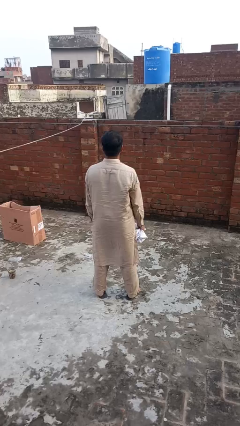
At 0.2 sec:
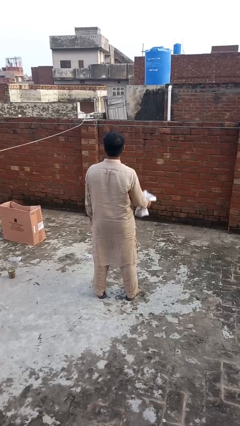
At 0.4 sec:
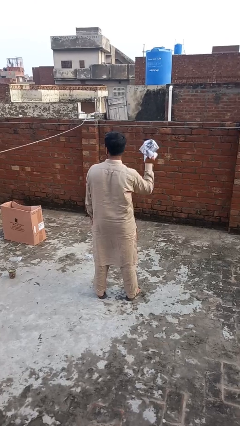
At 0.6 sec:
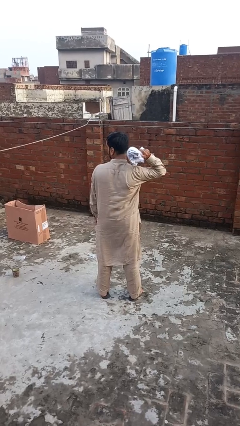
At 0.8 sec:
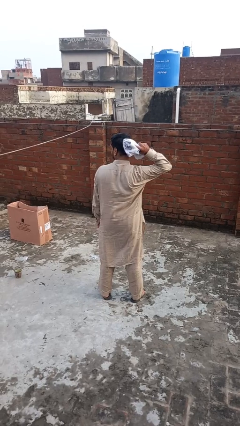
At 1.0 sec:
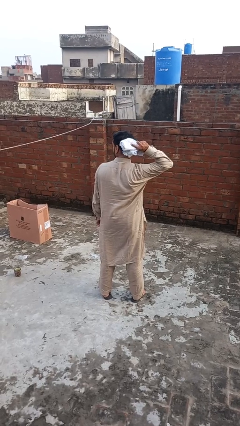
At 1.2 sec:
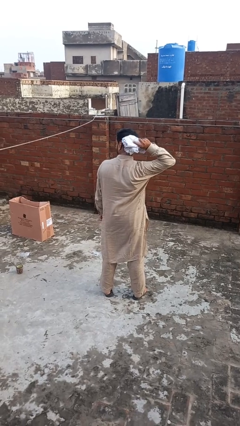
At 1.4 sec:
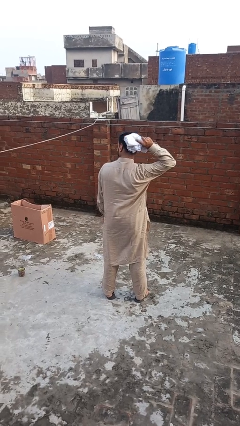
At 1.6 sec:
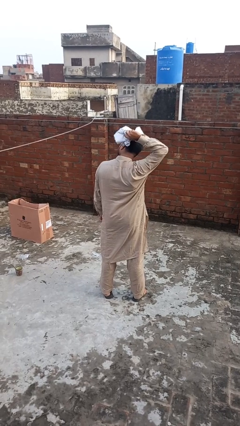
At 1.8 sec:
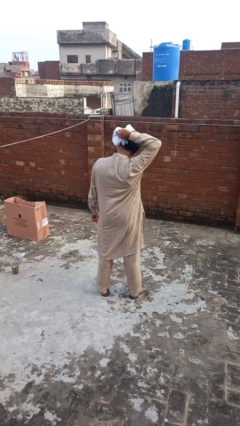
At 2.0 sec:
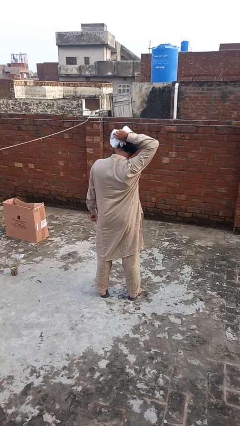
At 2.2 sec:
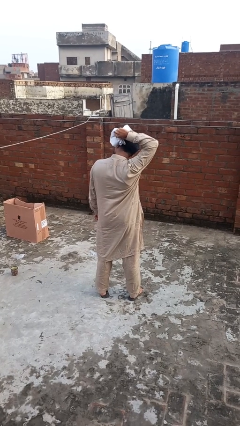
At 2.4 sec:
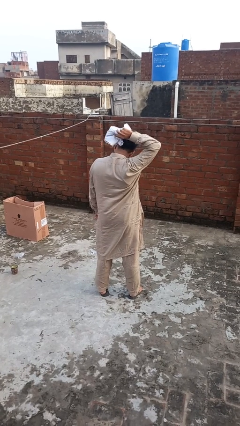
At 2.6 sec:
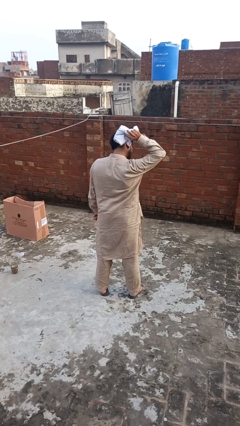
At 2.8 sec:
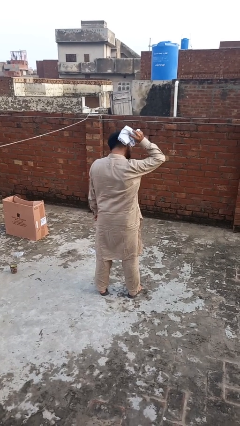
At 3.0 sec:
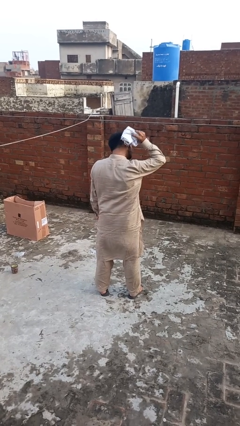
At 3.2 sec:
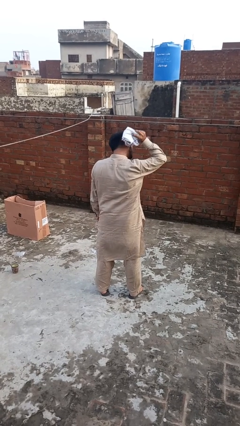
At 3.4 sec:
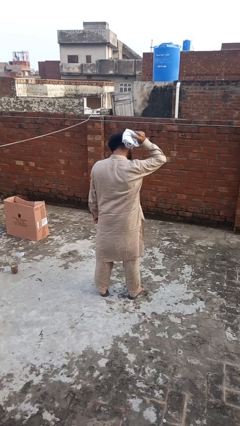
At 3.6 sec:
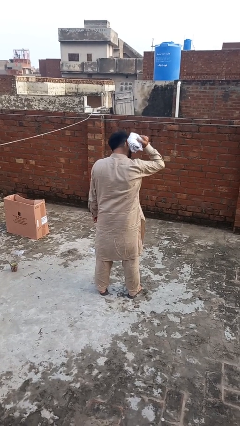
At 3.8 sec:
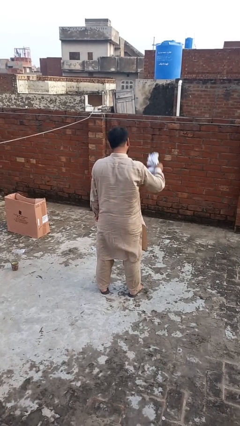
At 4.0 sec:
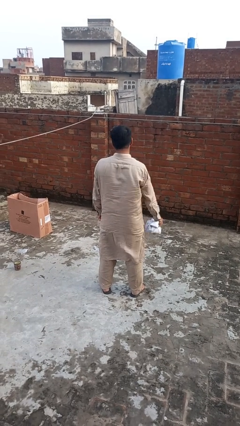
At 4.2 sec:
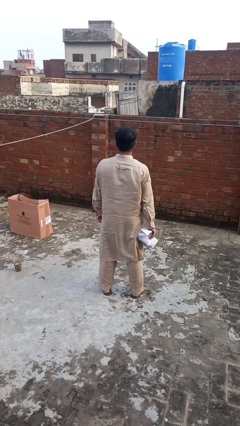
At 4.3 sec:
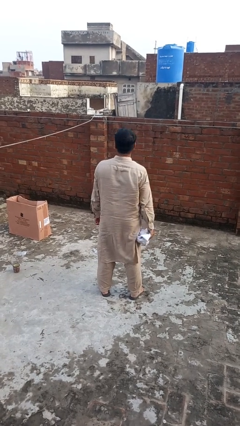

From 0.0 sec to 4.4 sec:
person dries hair with towel

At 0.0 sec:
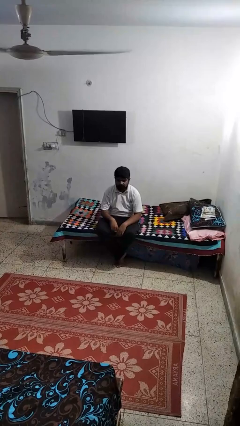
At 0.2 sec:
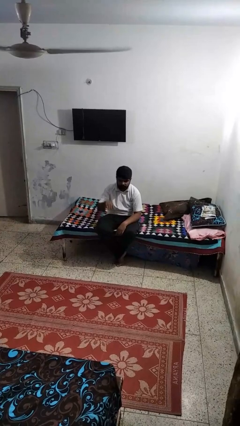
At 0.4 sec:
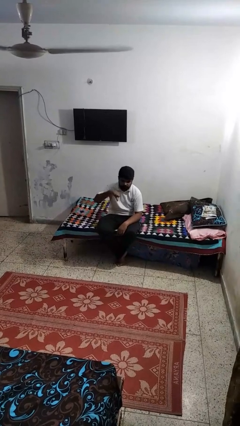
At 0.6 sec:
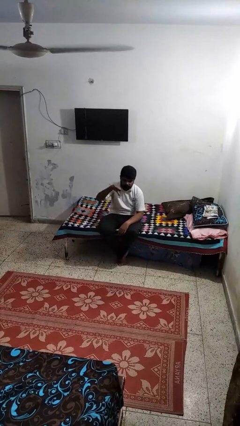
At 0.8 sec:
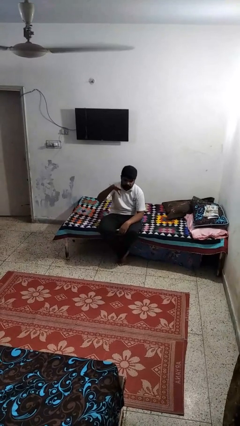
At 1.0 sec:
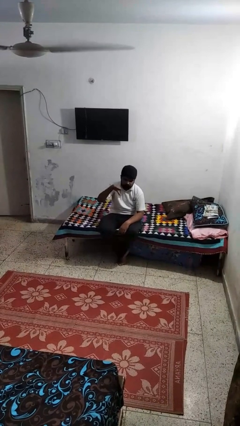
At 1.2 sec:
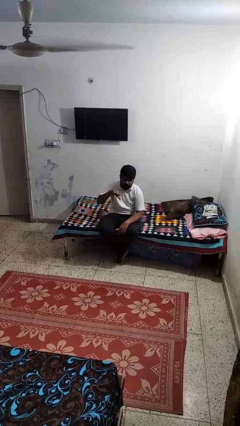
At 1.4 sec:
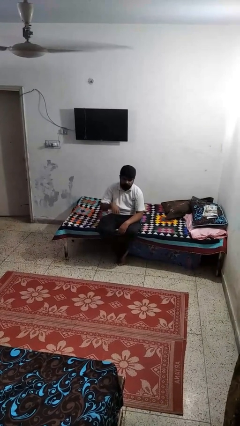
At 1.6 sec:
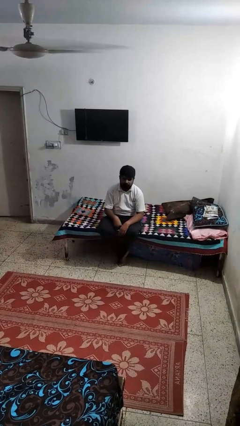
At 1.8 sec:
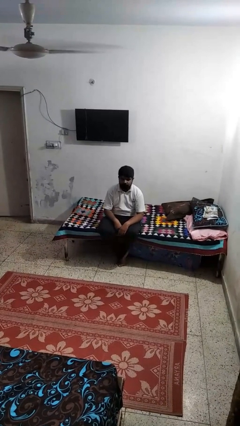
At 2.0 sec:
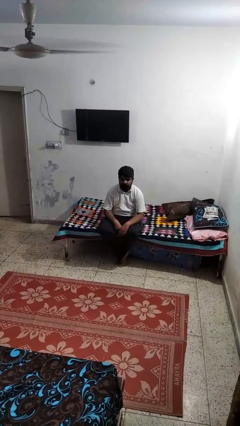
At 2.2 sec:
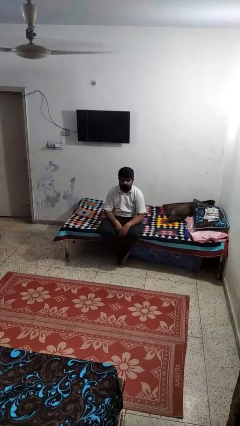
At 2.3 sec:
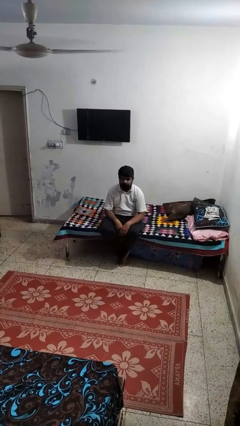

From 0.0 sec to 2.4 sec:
person gestures thumbs down

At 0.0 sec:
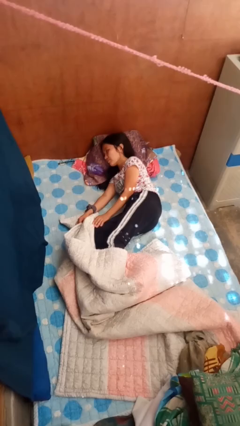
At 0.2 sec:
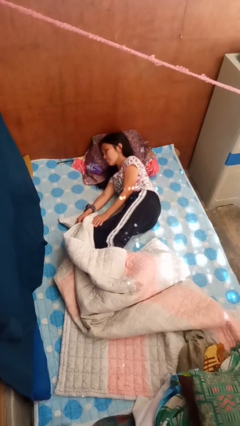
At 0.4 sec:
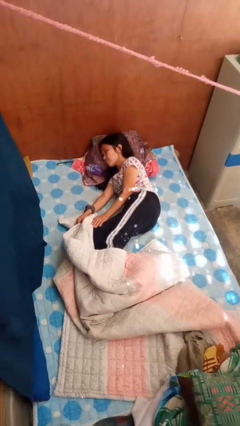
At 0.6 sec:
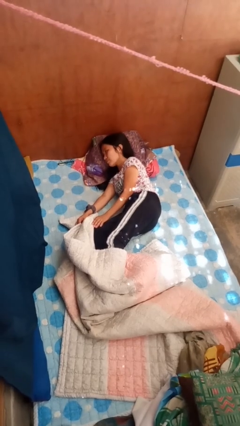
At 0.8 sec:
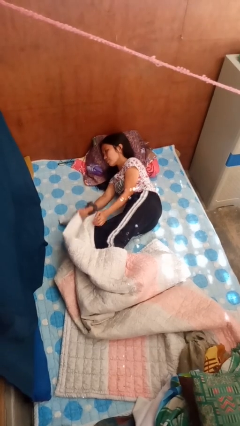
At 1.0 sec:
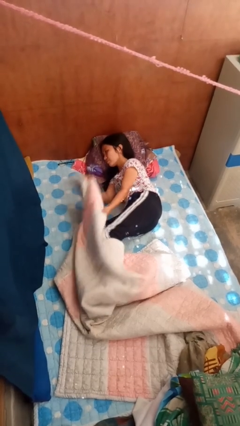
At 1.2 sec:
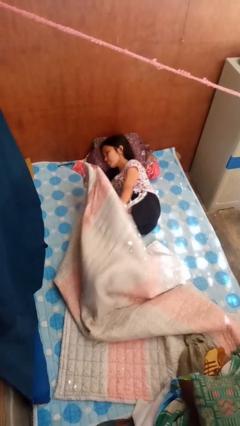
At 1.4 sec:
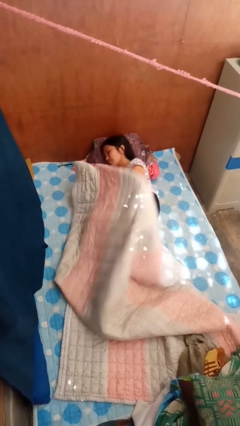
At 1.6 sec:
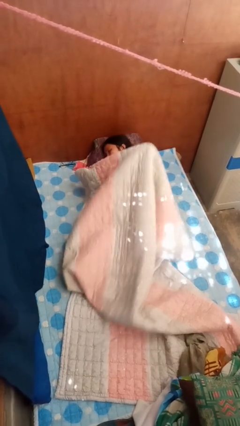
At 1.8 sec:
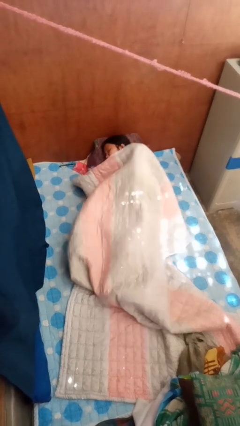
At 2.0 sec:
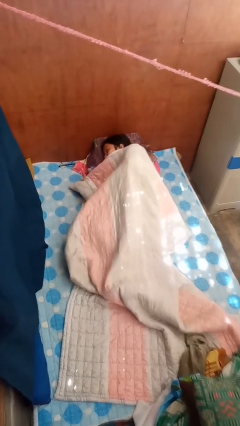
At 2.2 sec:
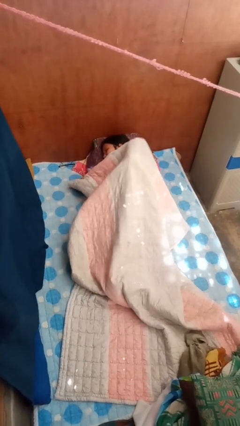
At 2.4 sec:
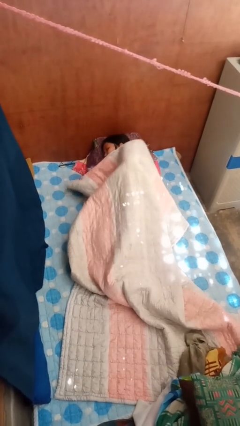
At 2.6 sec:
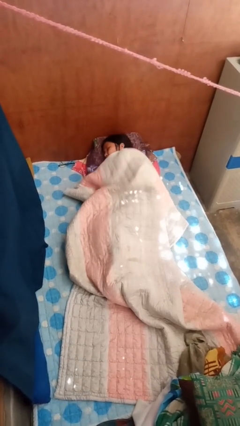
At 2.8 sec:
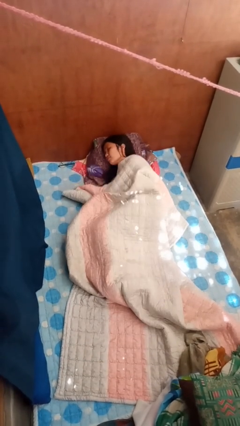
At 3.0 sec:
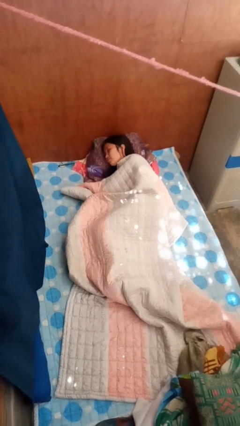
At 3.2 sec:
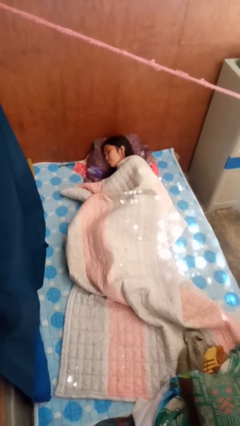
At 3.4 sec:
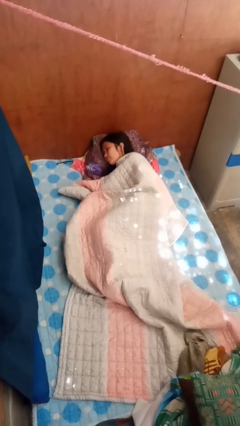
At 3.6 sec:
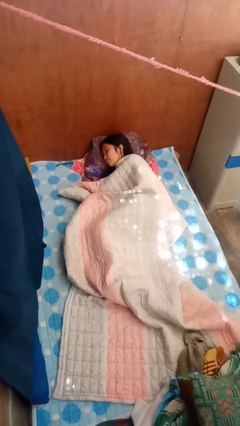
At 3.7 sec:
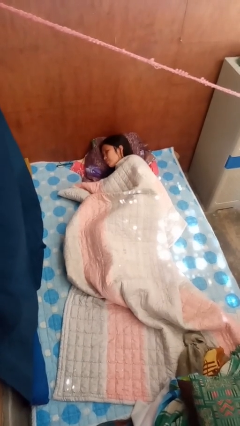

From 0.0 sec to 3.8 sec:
person covers with bedsheets

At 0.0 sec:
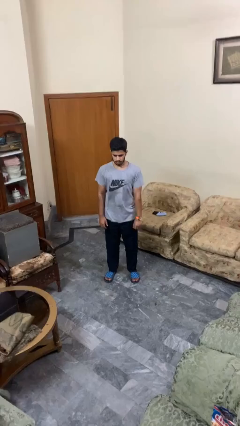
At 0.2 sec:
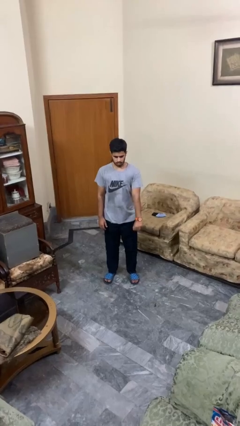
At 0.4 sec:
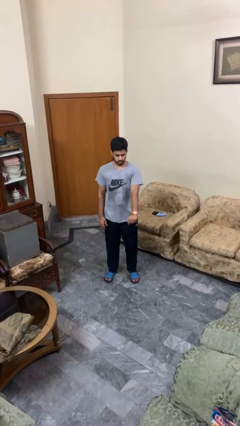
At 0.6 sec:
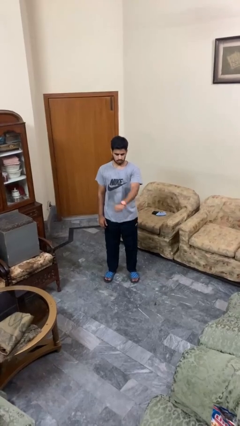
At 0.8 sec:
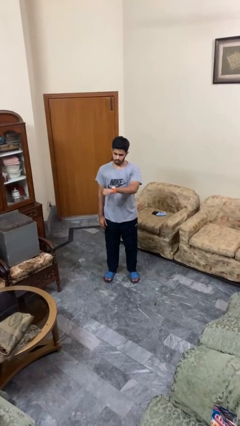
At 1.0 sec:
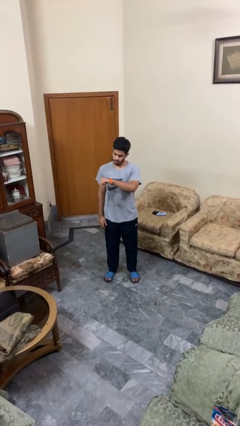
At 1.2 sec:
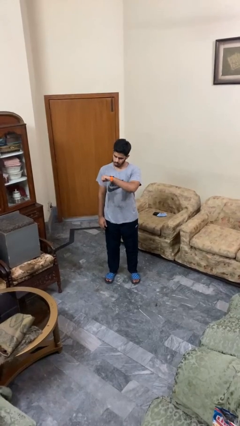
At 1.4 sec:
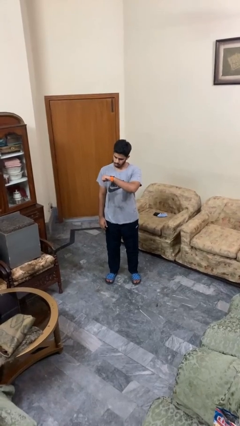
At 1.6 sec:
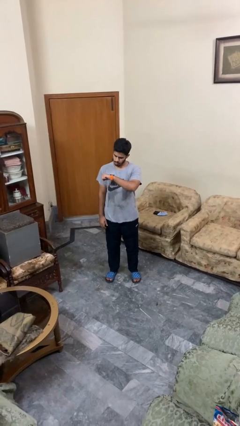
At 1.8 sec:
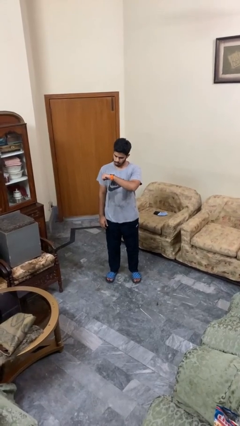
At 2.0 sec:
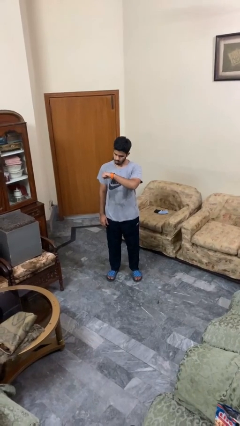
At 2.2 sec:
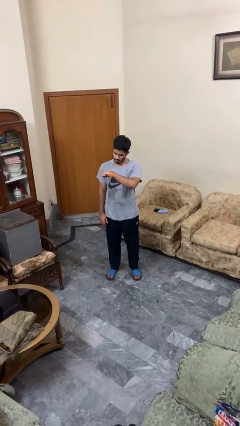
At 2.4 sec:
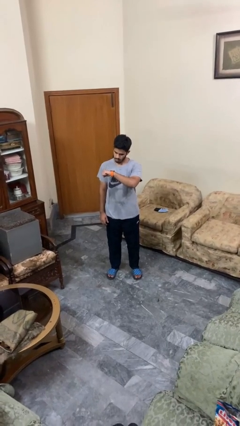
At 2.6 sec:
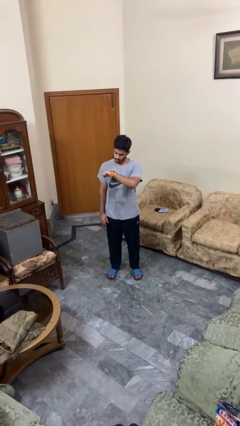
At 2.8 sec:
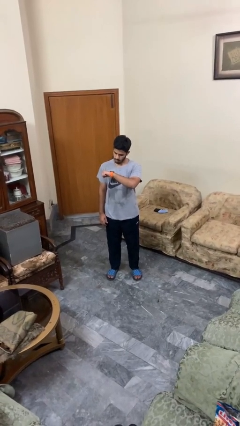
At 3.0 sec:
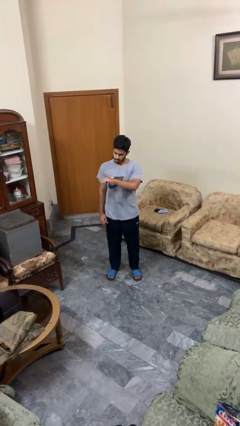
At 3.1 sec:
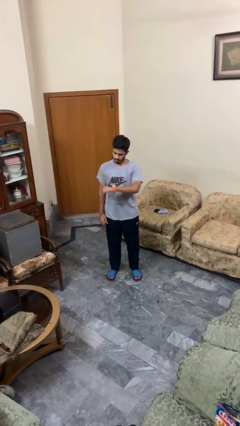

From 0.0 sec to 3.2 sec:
person looks at wristwatch

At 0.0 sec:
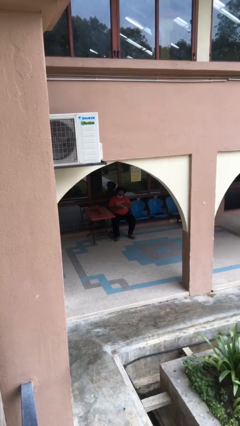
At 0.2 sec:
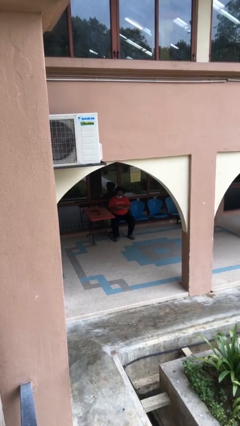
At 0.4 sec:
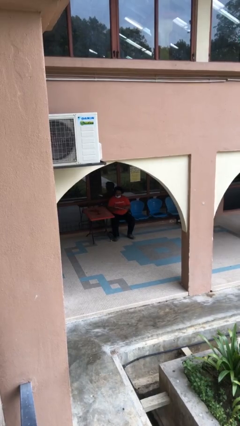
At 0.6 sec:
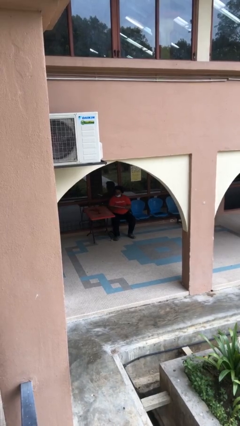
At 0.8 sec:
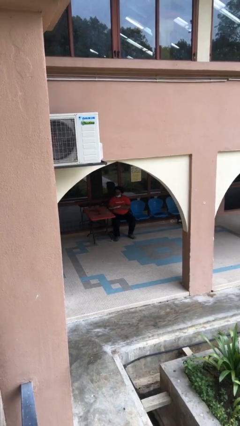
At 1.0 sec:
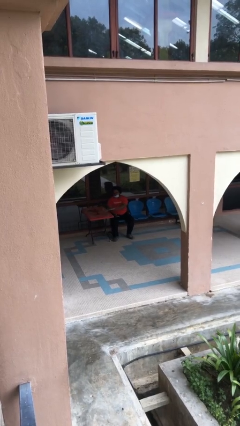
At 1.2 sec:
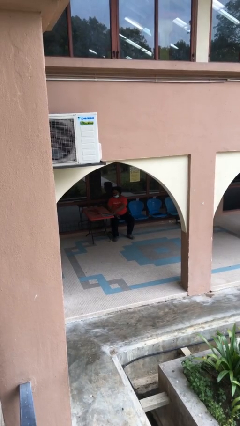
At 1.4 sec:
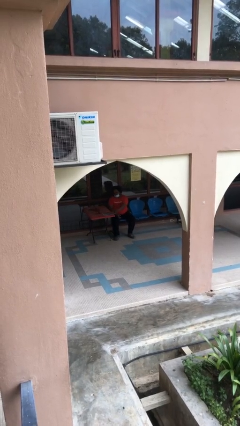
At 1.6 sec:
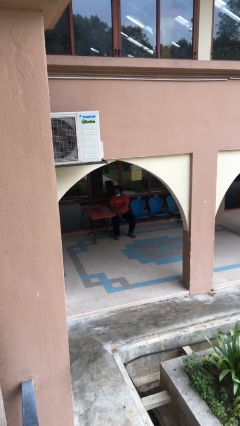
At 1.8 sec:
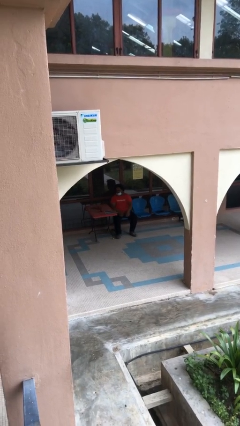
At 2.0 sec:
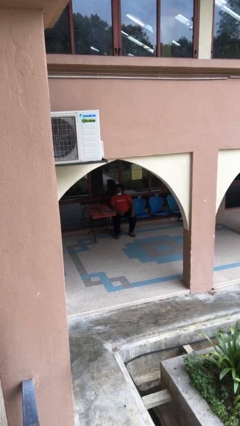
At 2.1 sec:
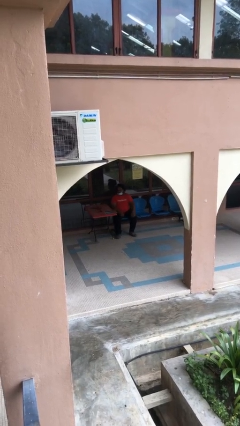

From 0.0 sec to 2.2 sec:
person puts down object on table

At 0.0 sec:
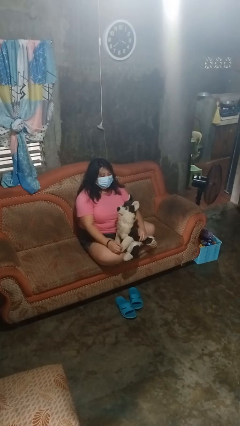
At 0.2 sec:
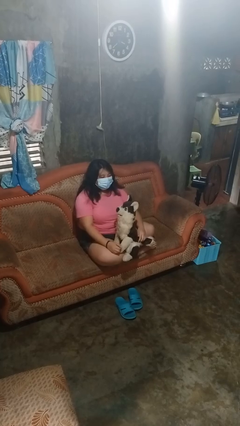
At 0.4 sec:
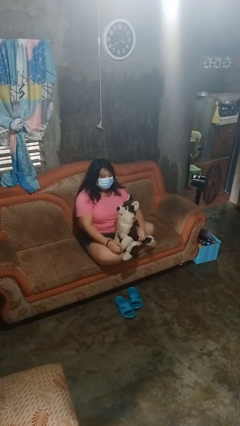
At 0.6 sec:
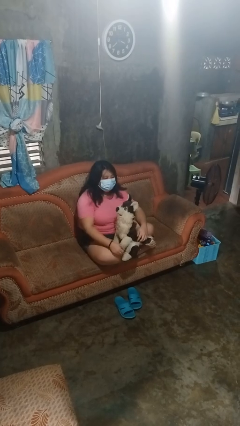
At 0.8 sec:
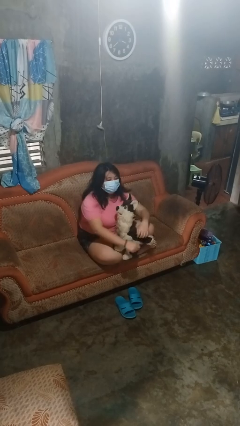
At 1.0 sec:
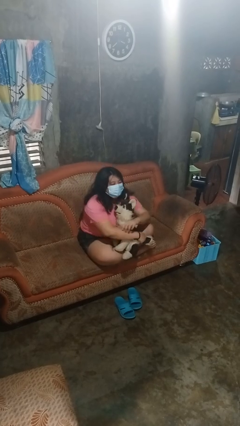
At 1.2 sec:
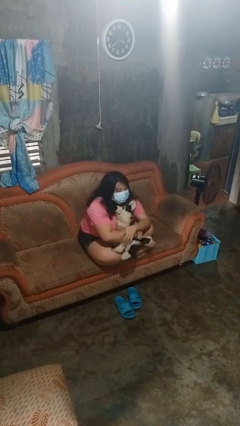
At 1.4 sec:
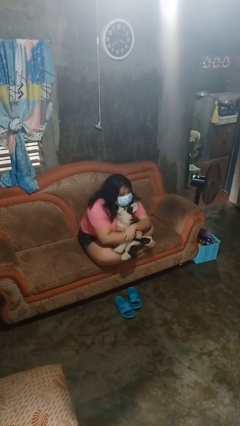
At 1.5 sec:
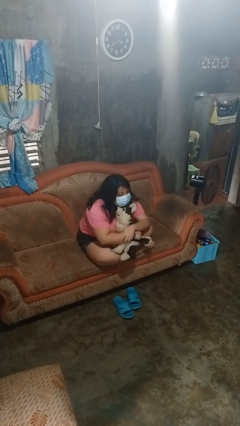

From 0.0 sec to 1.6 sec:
person hugs stuffed animal
